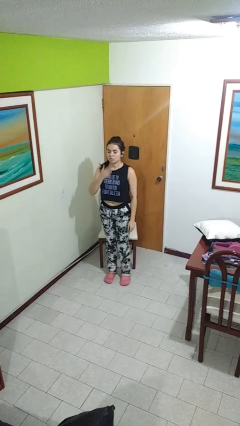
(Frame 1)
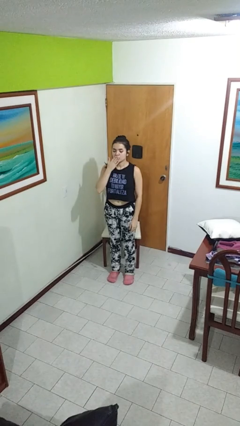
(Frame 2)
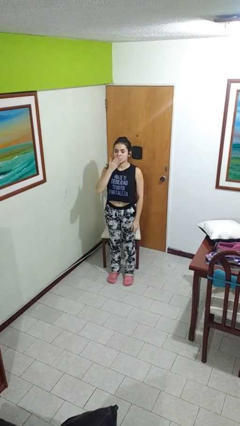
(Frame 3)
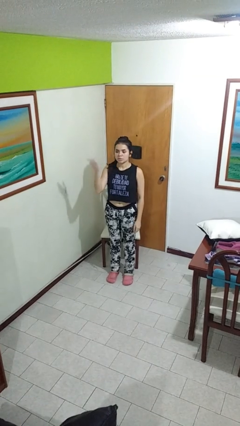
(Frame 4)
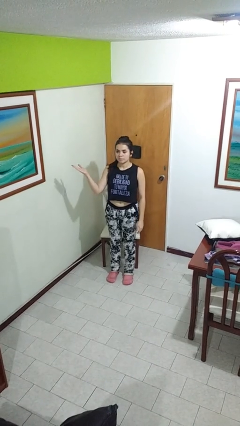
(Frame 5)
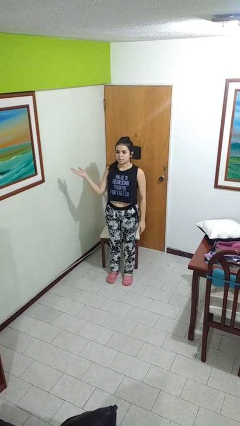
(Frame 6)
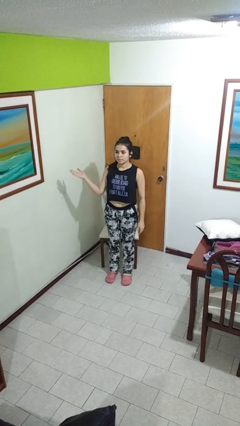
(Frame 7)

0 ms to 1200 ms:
person gestures blow kiss

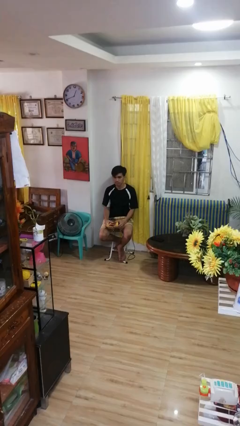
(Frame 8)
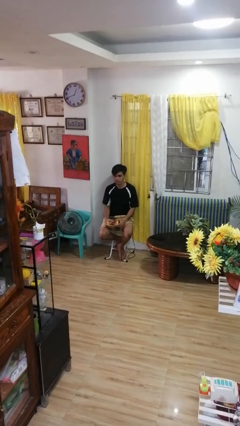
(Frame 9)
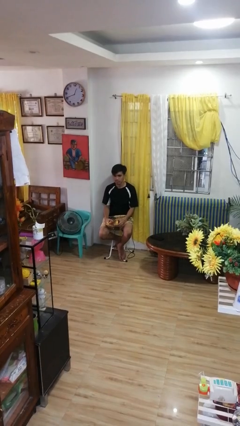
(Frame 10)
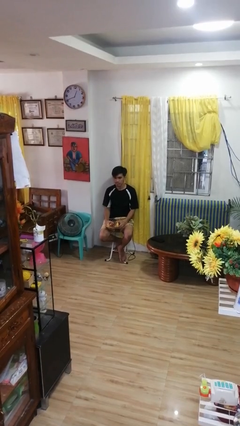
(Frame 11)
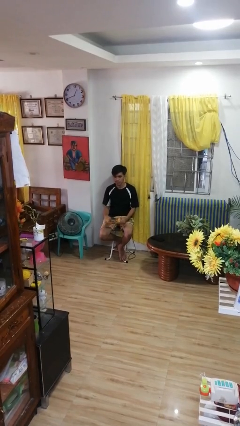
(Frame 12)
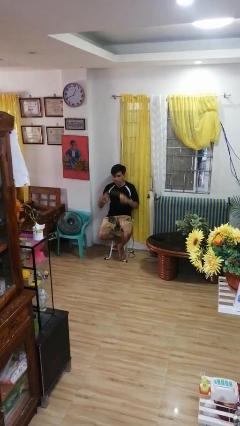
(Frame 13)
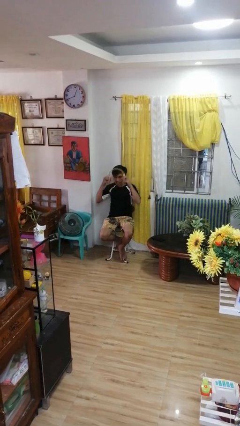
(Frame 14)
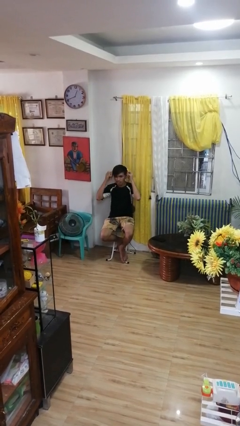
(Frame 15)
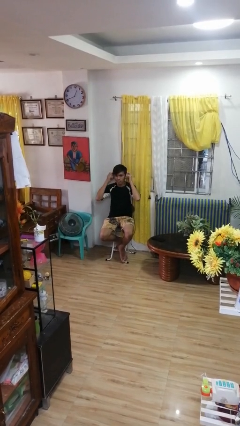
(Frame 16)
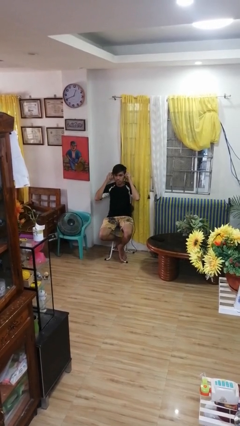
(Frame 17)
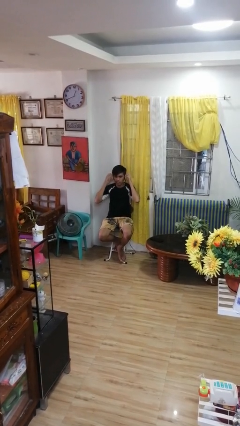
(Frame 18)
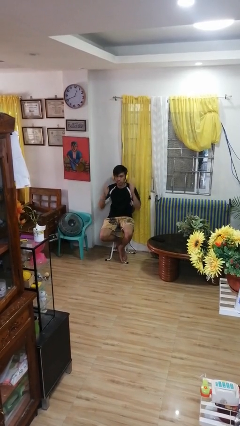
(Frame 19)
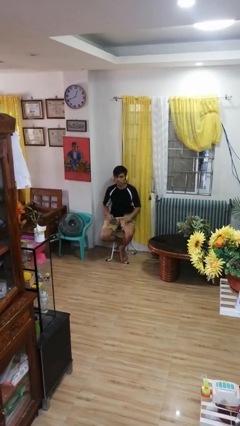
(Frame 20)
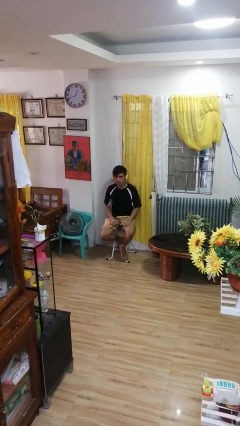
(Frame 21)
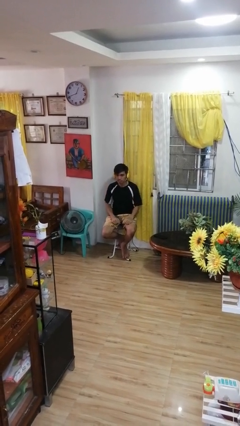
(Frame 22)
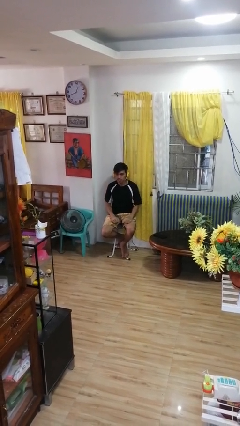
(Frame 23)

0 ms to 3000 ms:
person puts on headphones

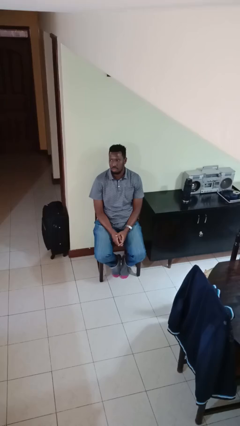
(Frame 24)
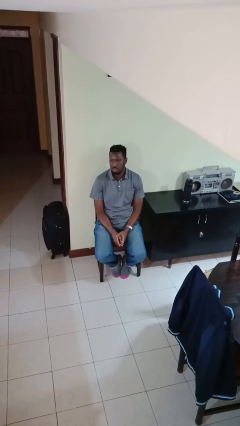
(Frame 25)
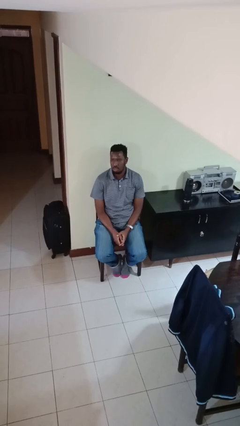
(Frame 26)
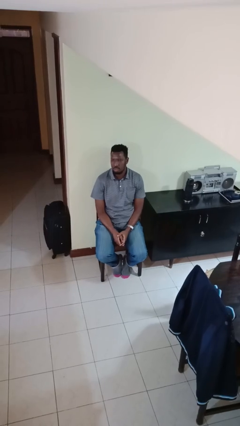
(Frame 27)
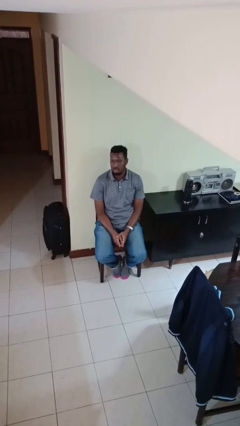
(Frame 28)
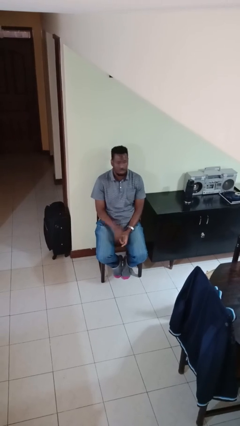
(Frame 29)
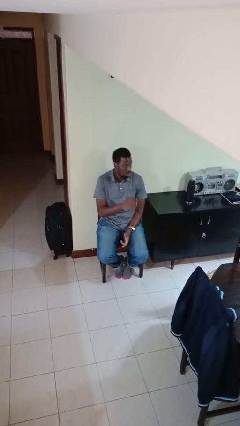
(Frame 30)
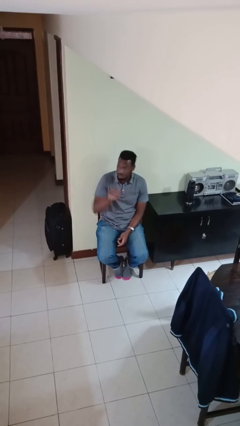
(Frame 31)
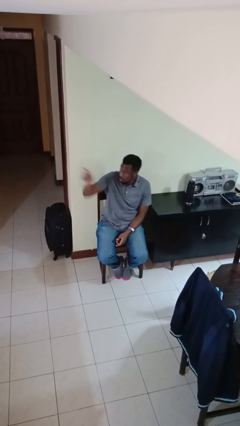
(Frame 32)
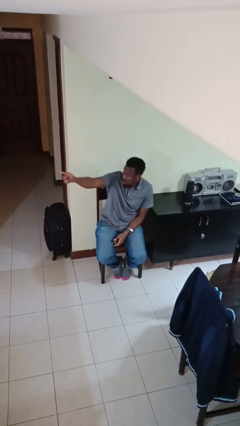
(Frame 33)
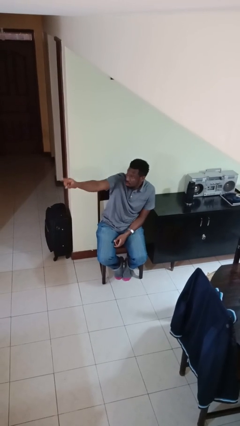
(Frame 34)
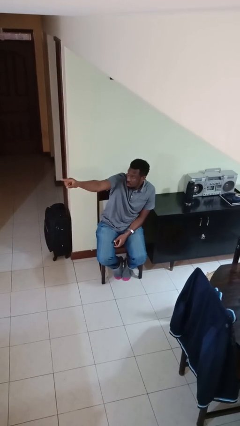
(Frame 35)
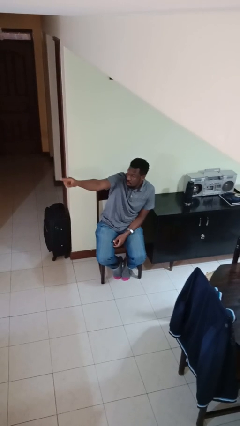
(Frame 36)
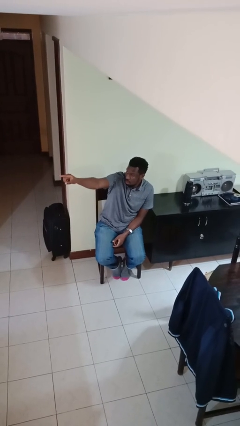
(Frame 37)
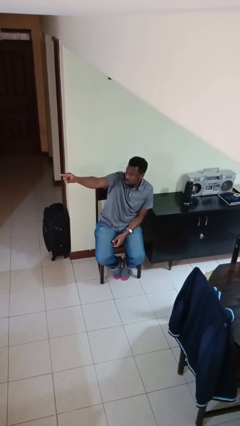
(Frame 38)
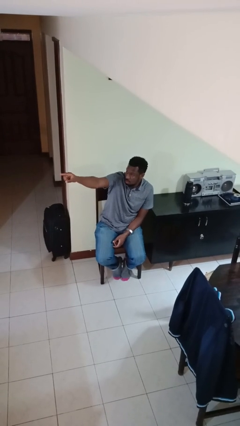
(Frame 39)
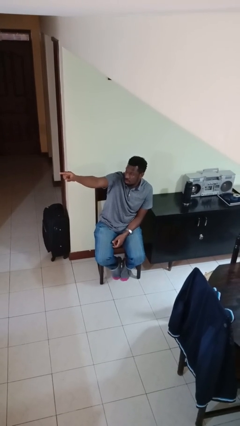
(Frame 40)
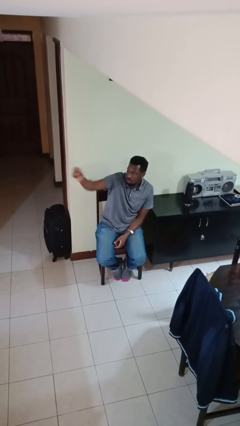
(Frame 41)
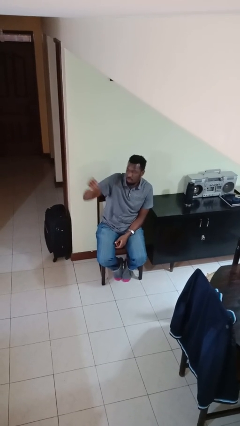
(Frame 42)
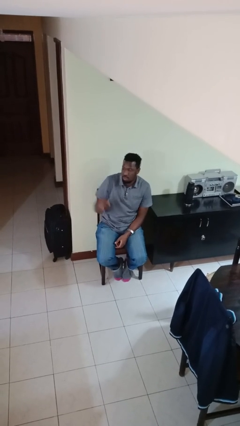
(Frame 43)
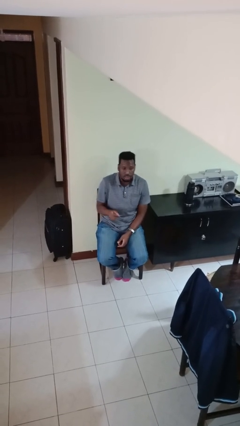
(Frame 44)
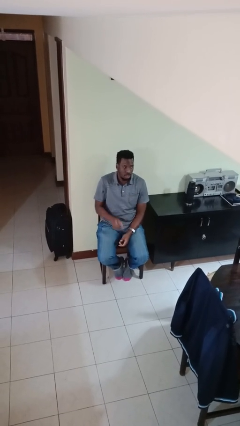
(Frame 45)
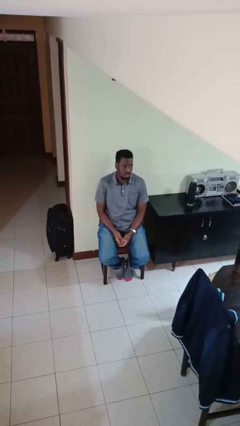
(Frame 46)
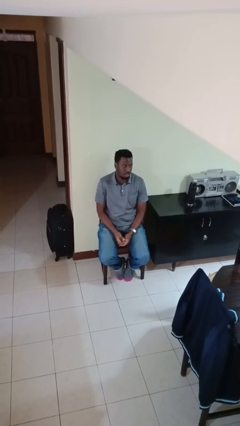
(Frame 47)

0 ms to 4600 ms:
person points at person

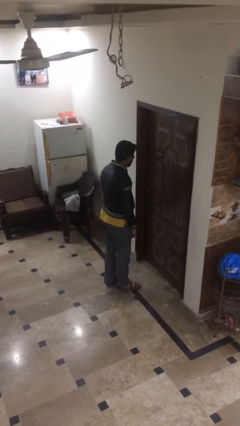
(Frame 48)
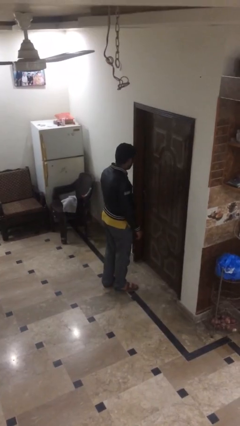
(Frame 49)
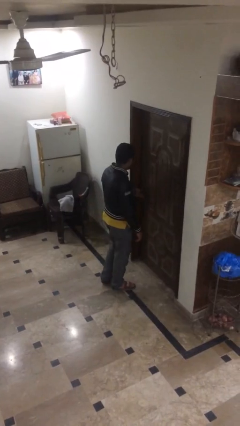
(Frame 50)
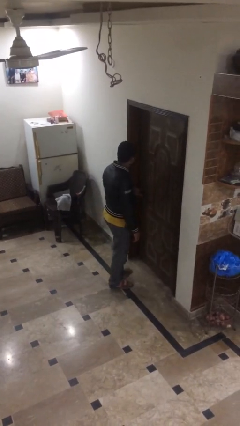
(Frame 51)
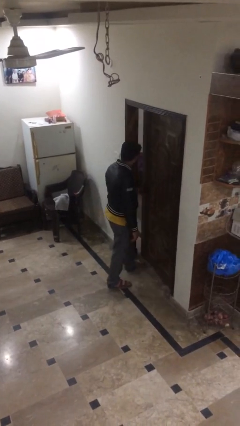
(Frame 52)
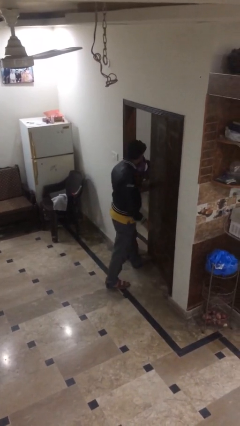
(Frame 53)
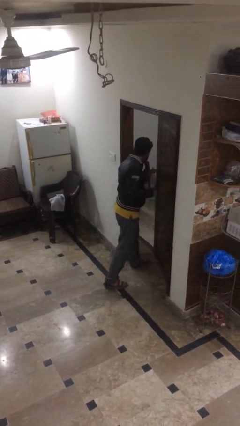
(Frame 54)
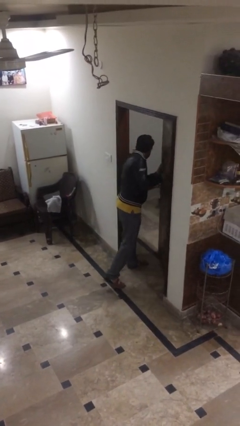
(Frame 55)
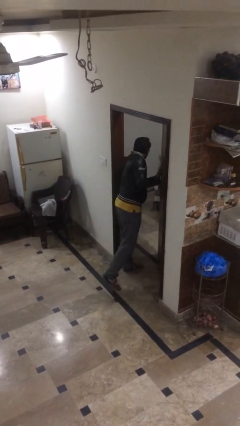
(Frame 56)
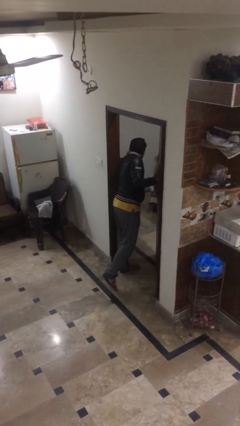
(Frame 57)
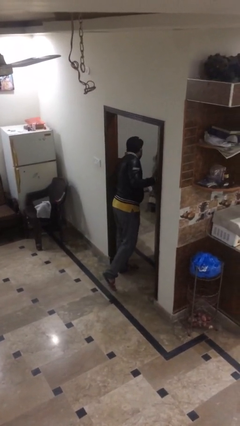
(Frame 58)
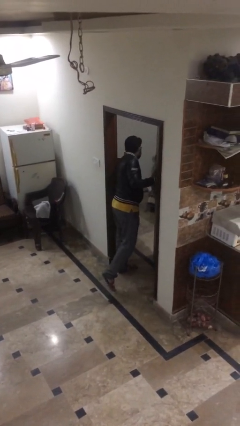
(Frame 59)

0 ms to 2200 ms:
person opens facility door

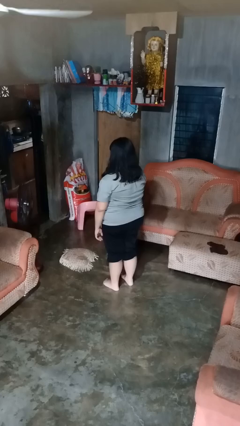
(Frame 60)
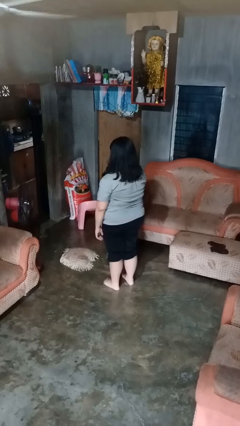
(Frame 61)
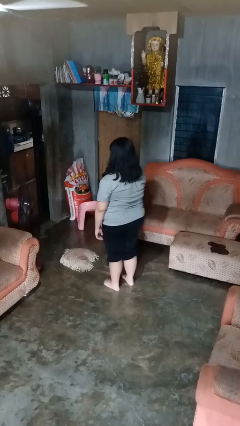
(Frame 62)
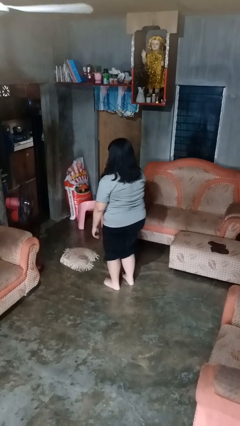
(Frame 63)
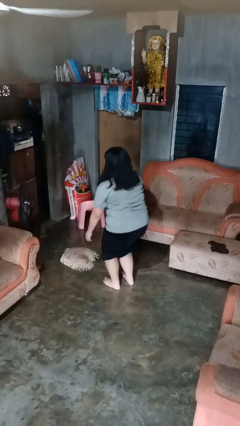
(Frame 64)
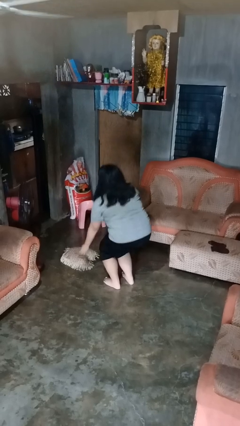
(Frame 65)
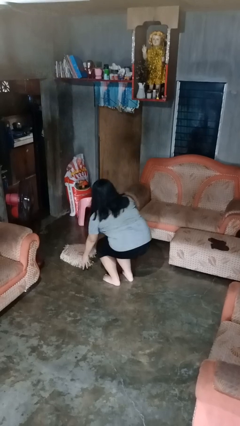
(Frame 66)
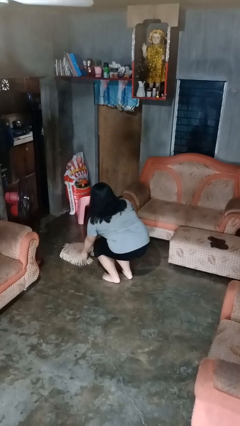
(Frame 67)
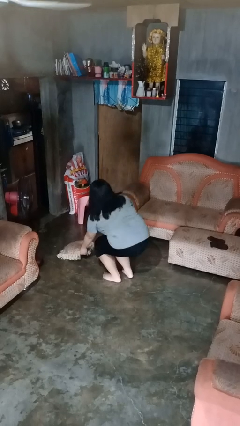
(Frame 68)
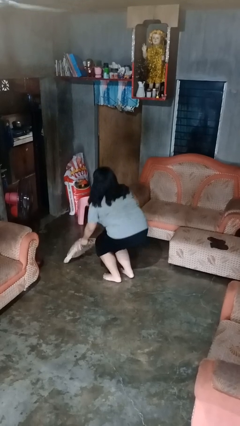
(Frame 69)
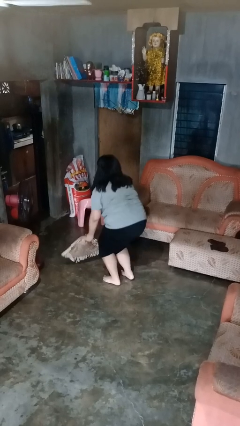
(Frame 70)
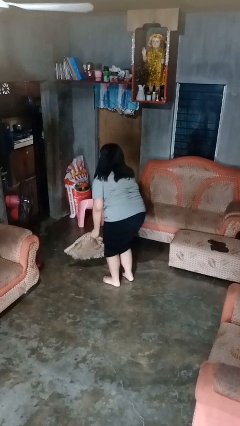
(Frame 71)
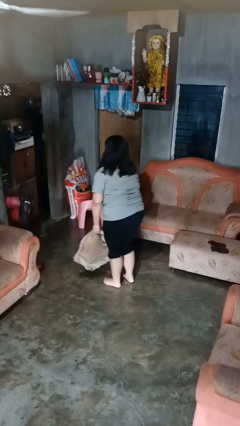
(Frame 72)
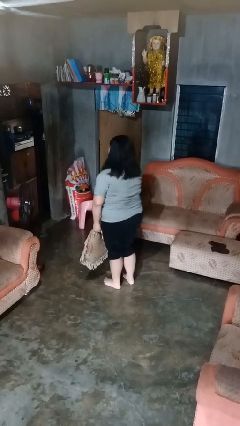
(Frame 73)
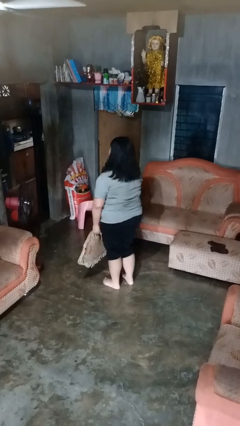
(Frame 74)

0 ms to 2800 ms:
person picks up object from floor

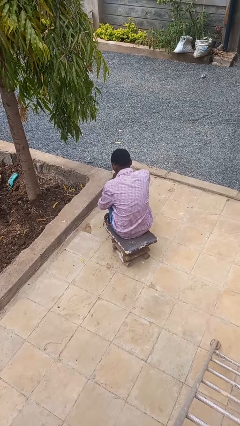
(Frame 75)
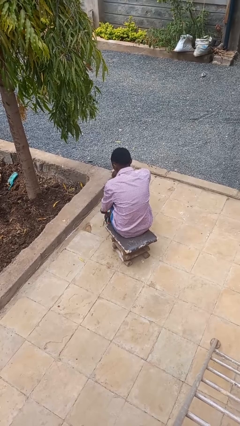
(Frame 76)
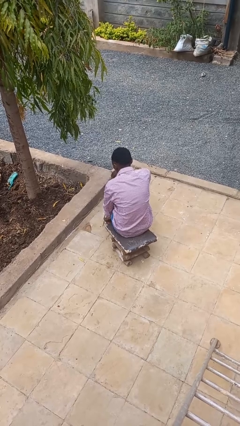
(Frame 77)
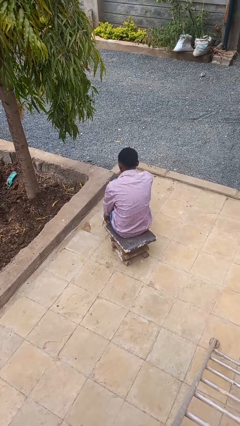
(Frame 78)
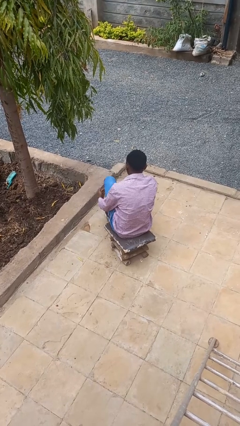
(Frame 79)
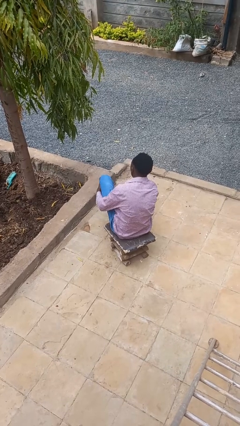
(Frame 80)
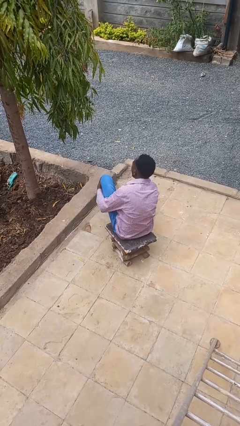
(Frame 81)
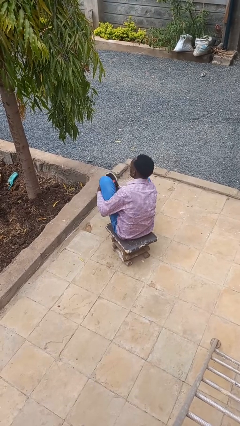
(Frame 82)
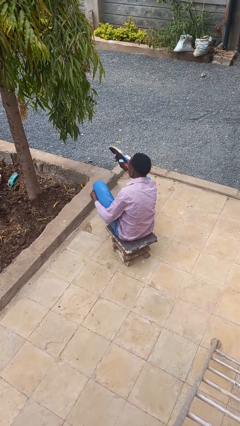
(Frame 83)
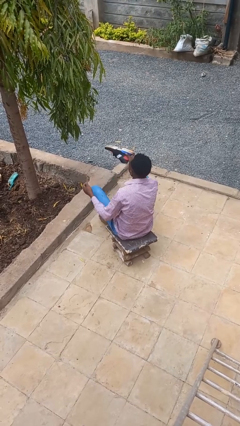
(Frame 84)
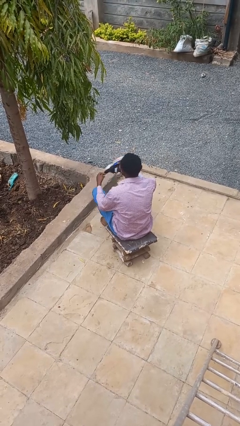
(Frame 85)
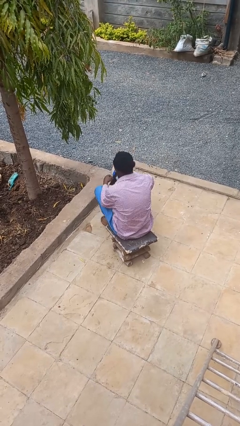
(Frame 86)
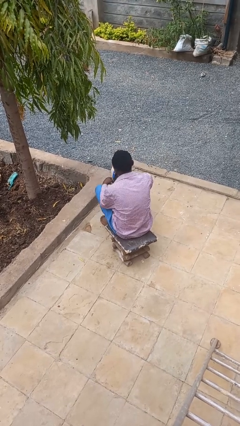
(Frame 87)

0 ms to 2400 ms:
person takes off shoes

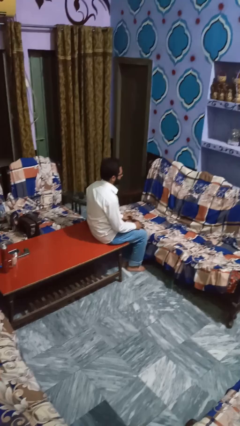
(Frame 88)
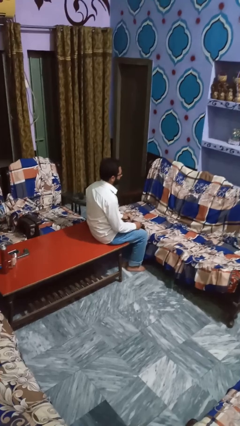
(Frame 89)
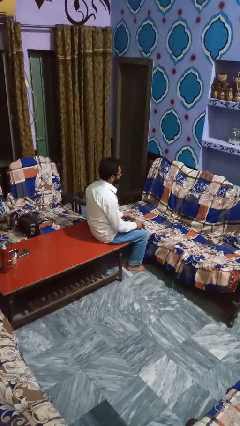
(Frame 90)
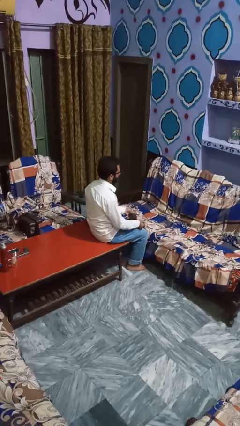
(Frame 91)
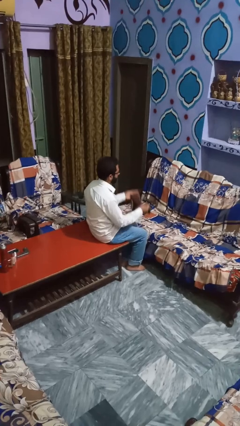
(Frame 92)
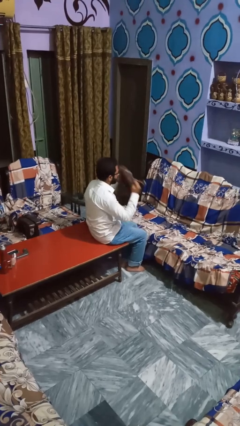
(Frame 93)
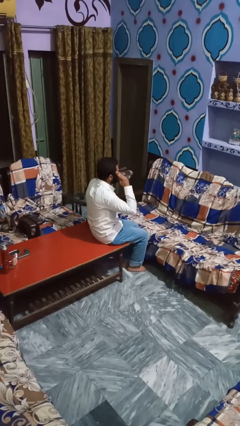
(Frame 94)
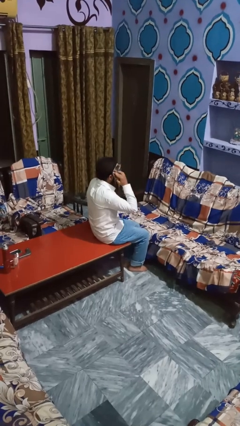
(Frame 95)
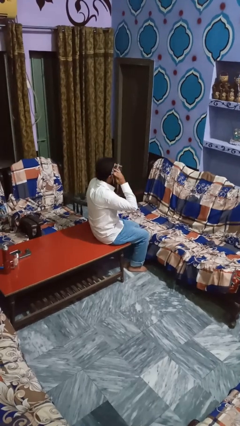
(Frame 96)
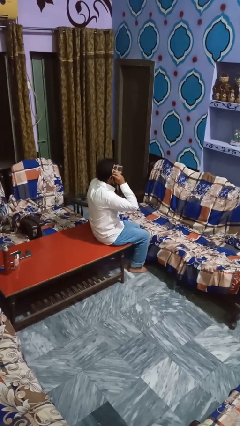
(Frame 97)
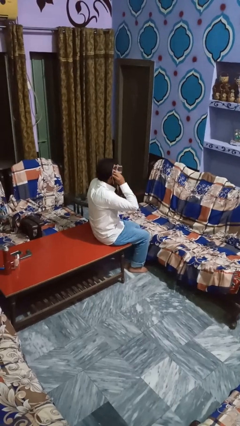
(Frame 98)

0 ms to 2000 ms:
person yawns
